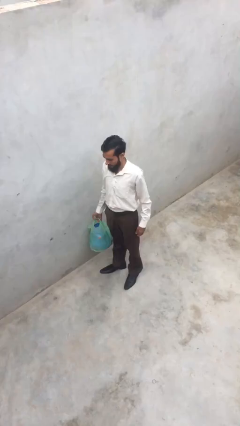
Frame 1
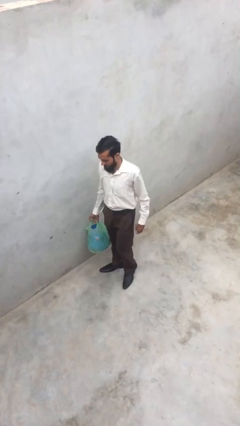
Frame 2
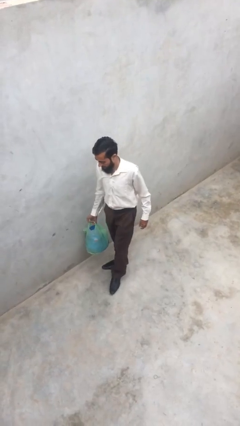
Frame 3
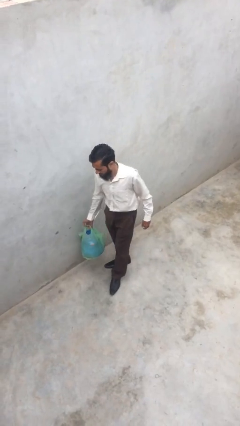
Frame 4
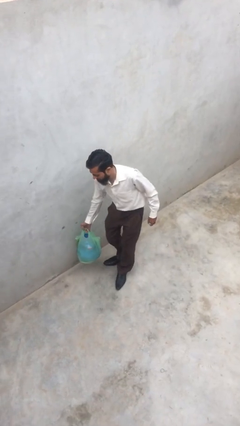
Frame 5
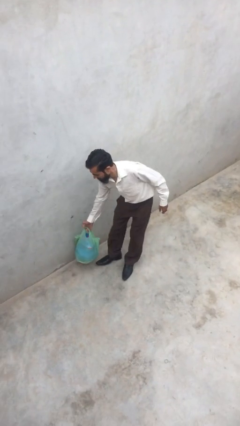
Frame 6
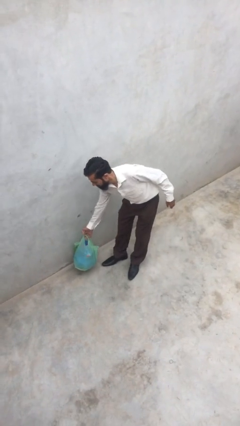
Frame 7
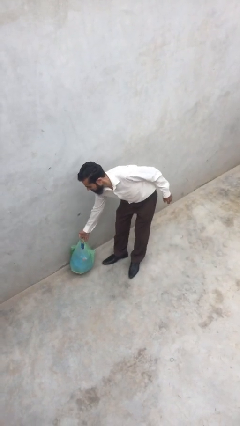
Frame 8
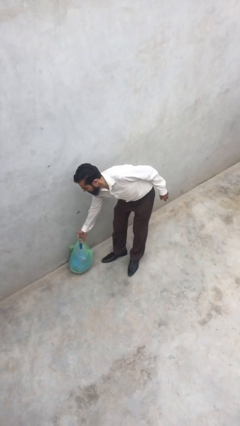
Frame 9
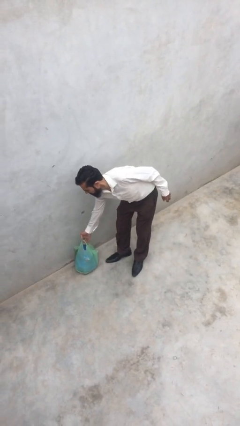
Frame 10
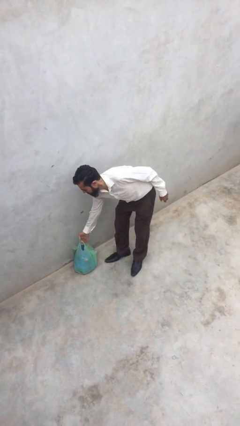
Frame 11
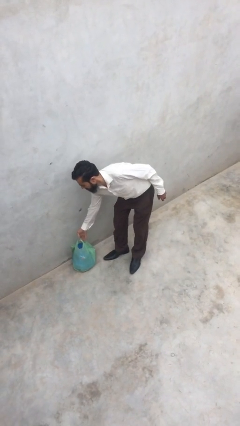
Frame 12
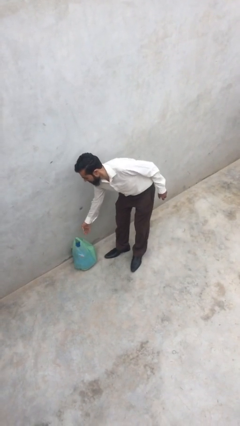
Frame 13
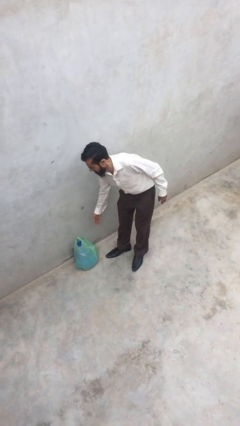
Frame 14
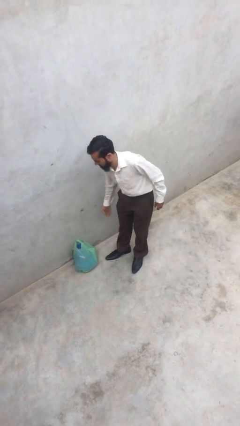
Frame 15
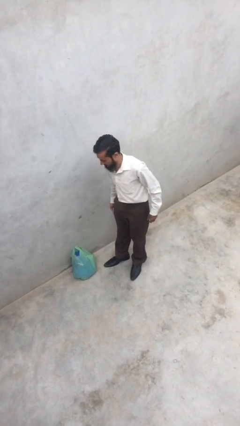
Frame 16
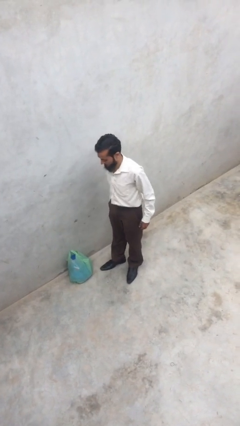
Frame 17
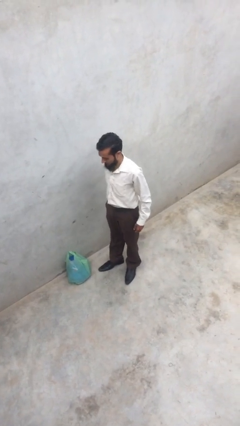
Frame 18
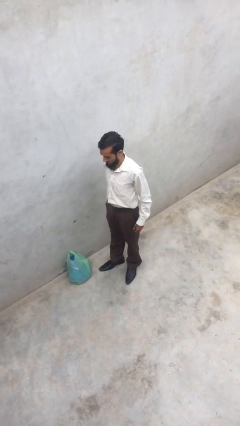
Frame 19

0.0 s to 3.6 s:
person puts down object on floor

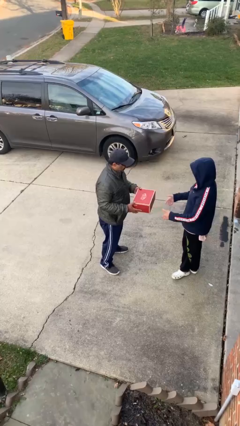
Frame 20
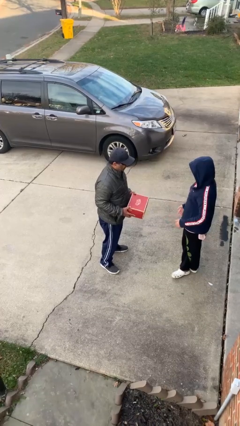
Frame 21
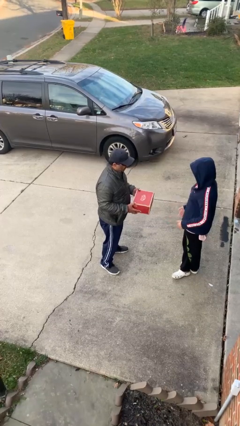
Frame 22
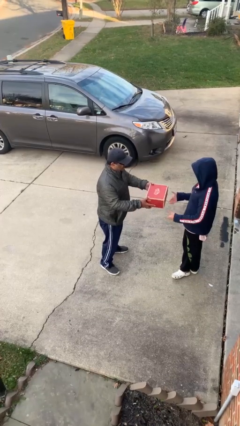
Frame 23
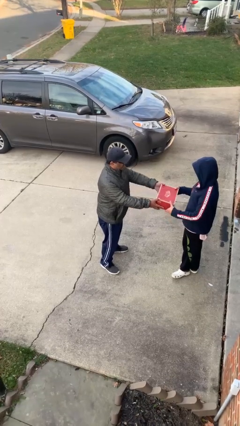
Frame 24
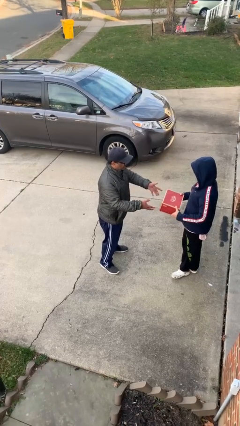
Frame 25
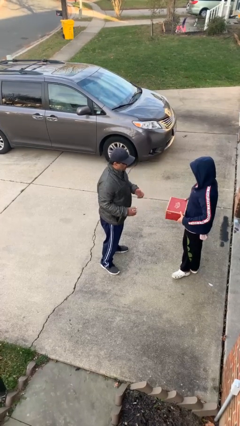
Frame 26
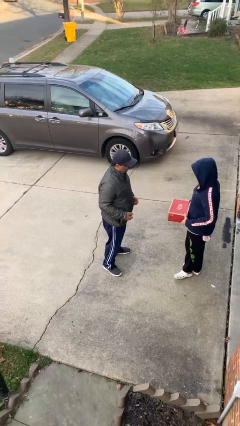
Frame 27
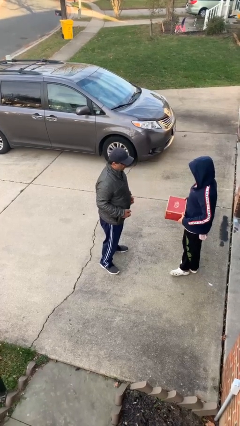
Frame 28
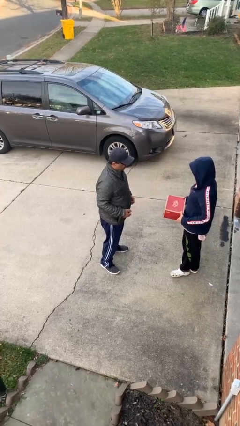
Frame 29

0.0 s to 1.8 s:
person transfers object to person

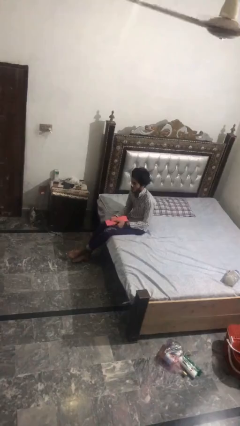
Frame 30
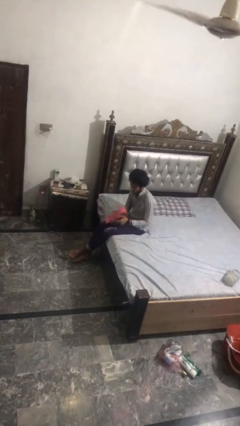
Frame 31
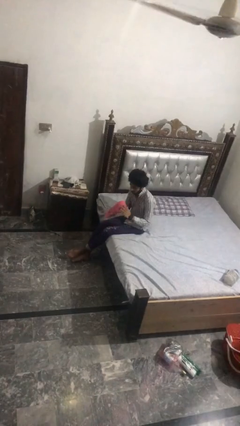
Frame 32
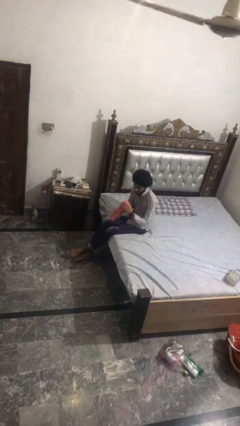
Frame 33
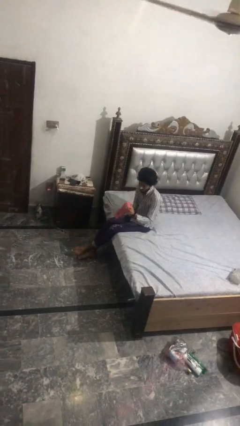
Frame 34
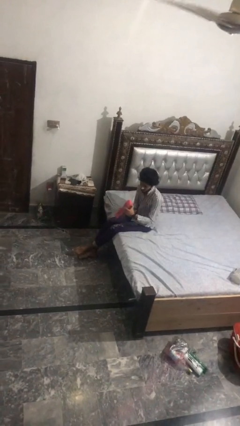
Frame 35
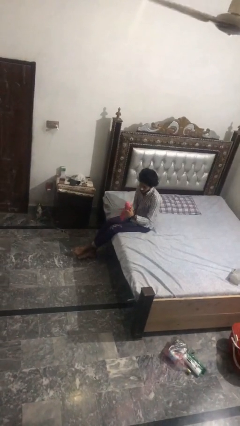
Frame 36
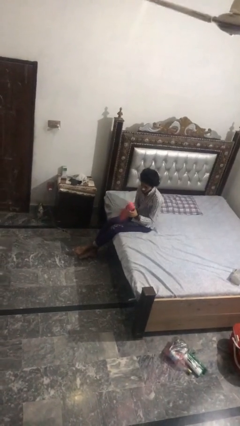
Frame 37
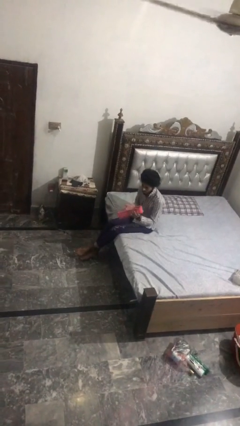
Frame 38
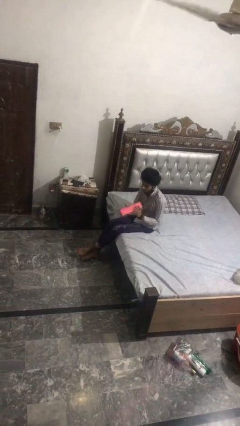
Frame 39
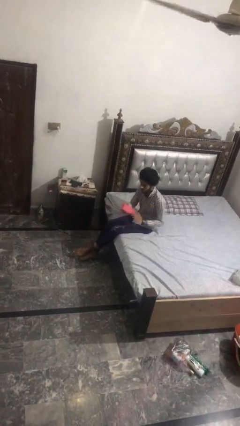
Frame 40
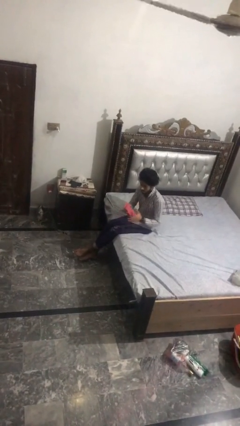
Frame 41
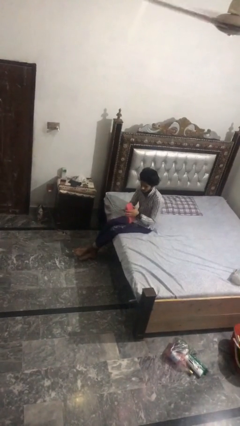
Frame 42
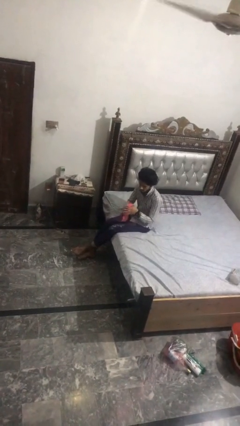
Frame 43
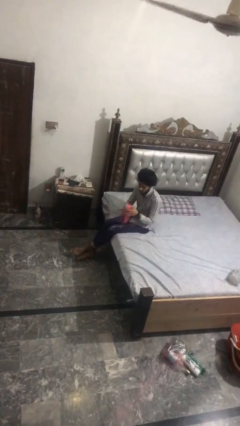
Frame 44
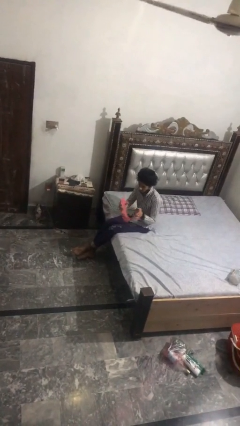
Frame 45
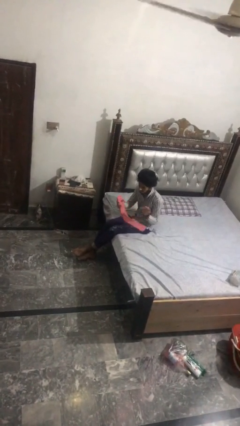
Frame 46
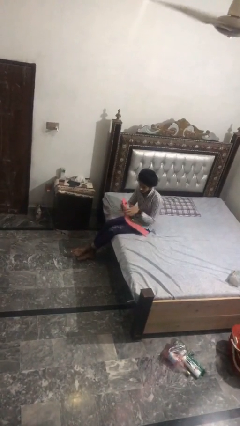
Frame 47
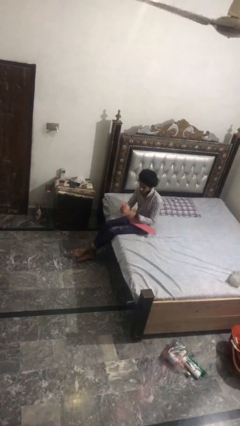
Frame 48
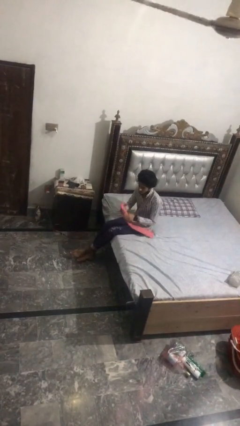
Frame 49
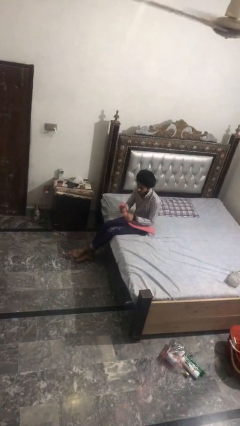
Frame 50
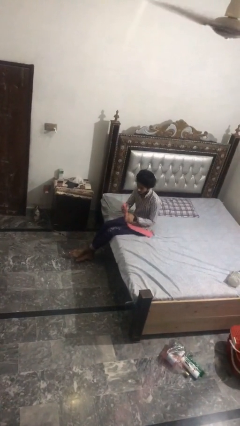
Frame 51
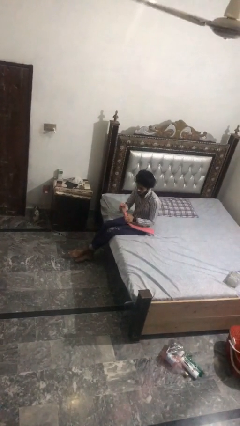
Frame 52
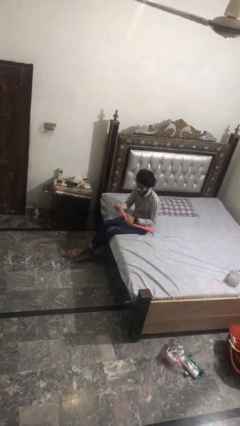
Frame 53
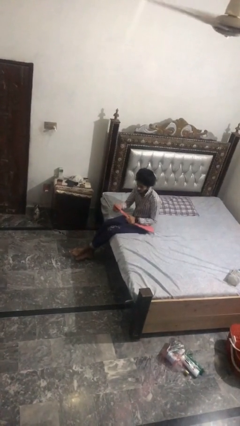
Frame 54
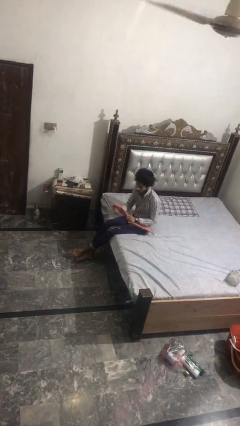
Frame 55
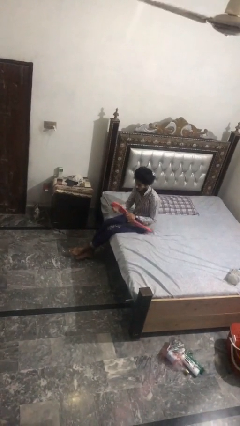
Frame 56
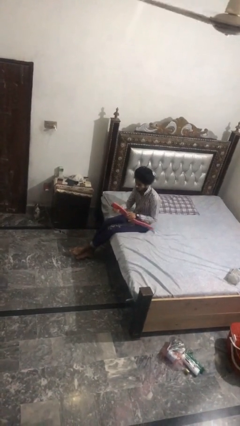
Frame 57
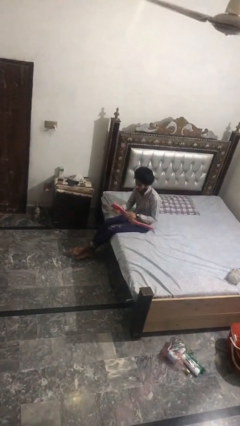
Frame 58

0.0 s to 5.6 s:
person squeezes object

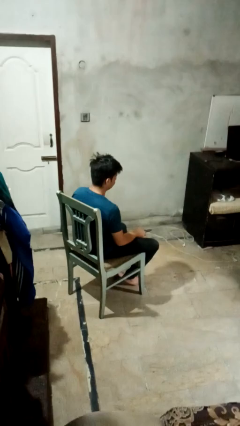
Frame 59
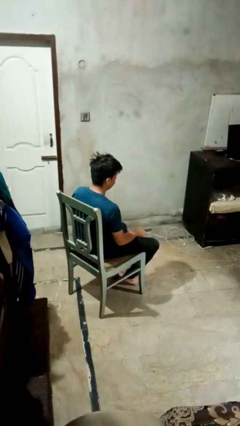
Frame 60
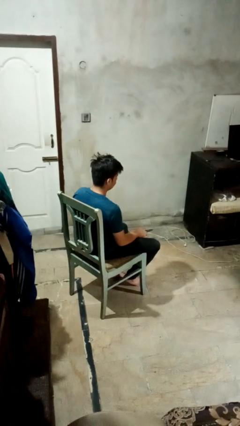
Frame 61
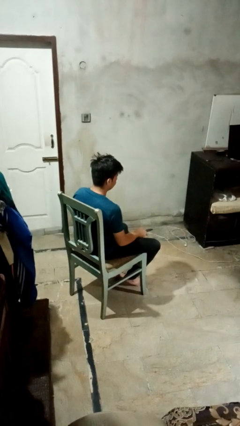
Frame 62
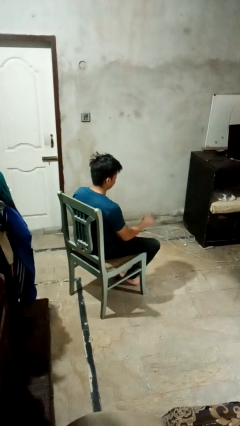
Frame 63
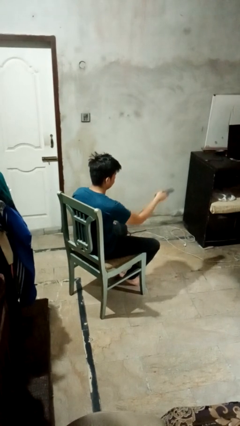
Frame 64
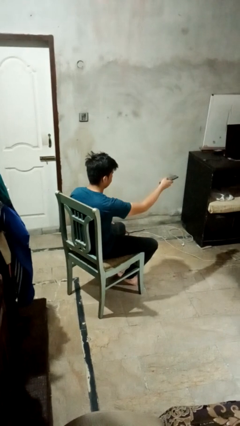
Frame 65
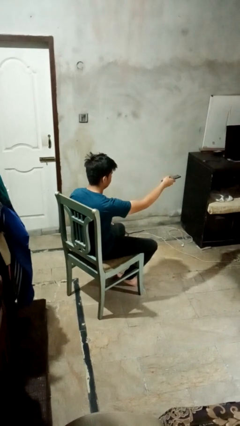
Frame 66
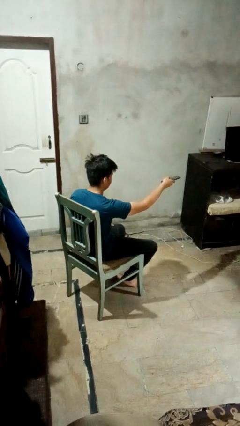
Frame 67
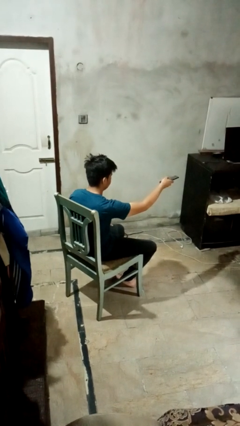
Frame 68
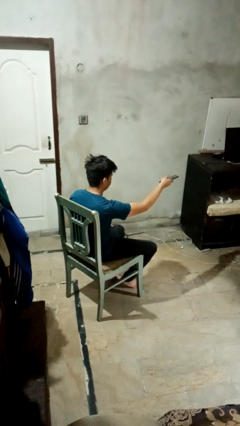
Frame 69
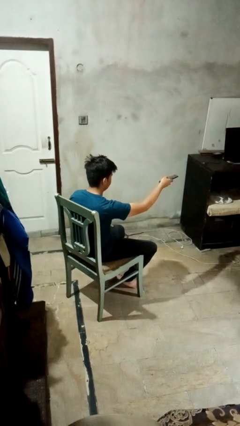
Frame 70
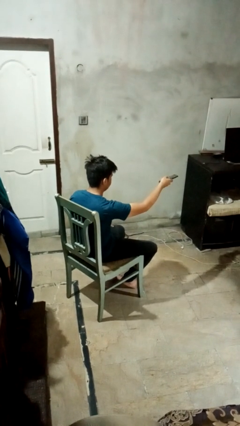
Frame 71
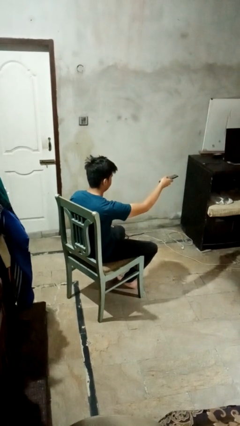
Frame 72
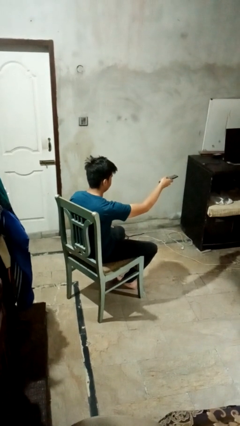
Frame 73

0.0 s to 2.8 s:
person uses television remote

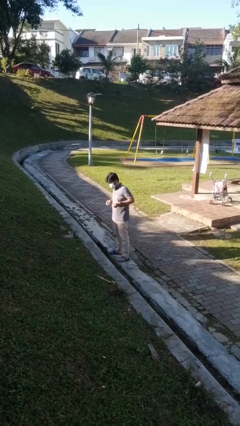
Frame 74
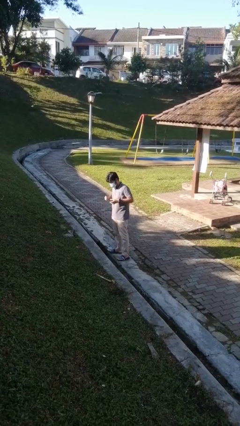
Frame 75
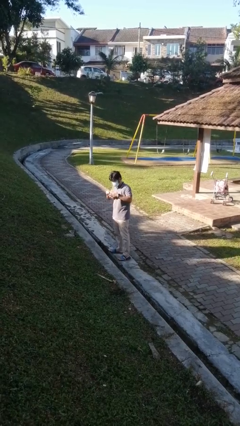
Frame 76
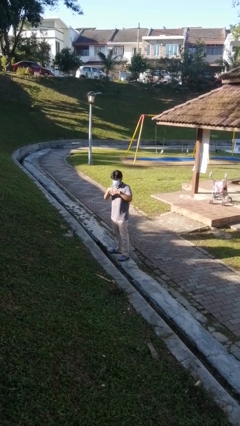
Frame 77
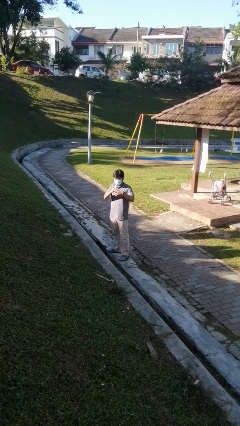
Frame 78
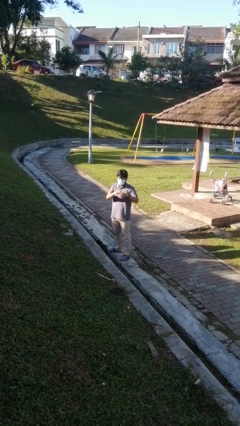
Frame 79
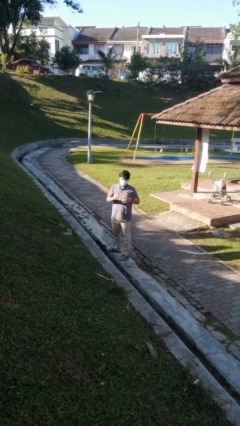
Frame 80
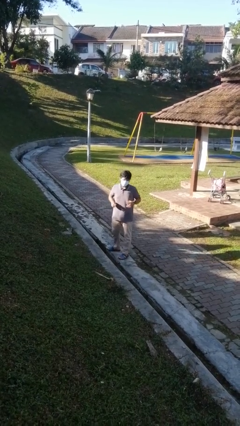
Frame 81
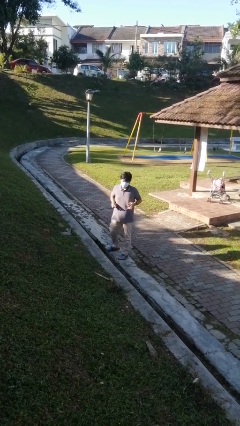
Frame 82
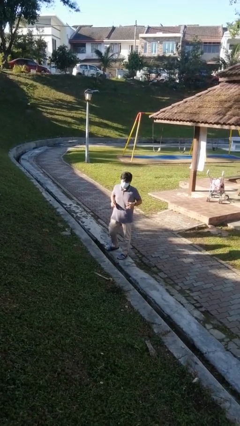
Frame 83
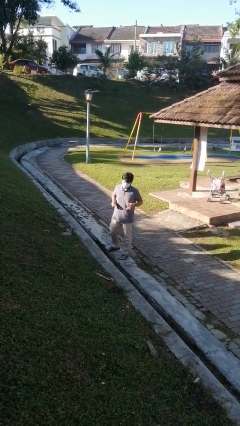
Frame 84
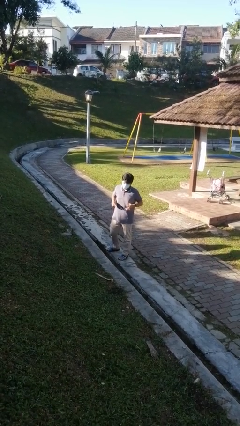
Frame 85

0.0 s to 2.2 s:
person puts on ring

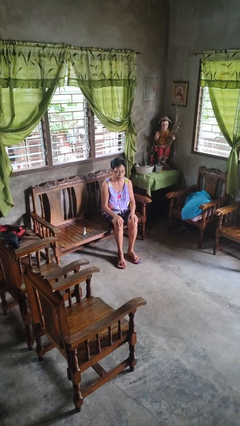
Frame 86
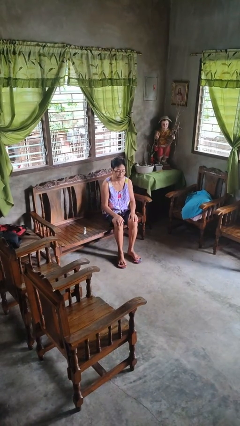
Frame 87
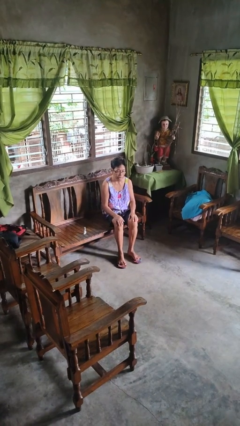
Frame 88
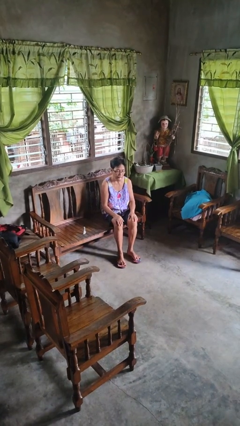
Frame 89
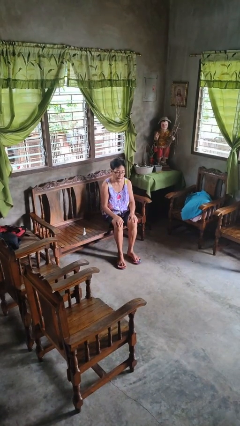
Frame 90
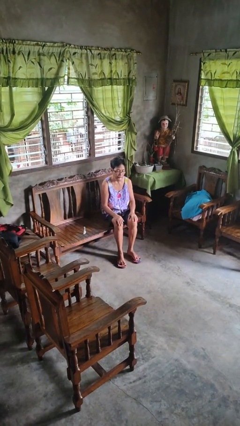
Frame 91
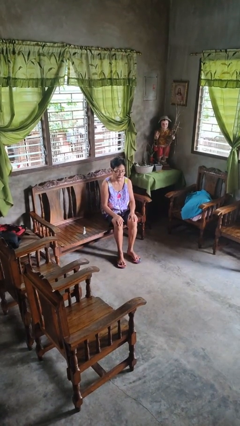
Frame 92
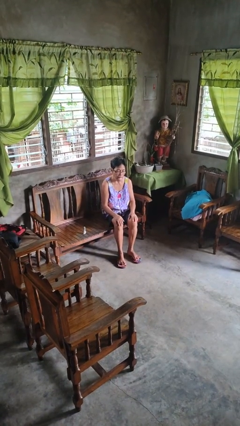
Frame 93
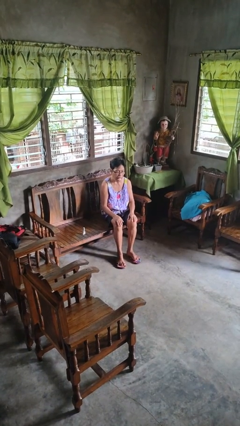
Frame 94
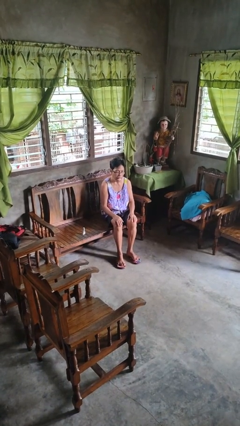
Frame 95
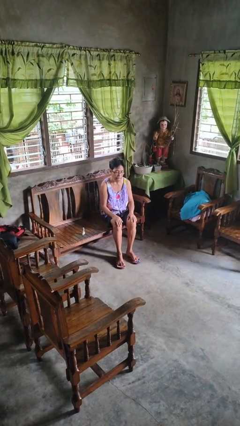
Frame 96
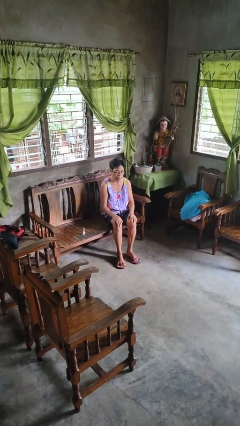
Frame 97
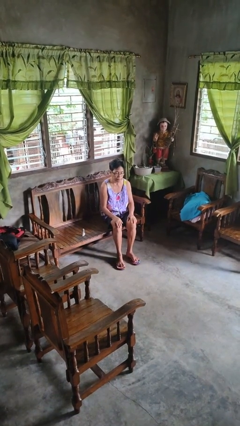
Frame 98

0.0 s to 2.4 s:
person sticks out tongue
